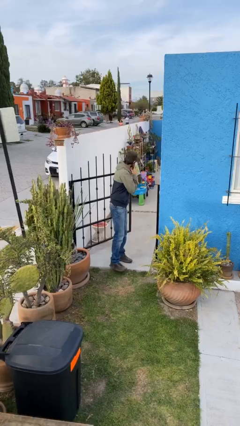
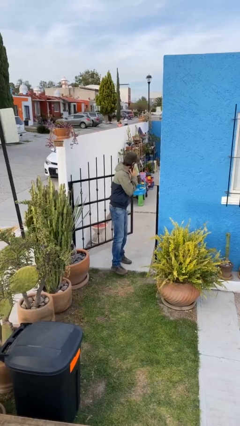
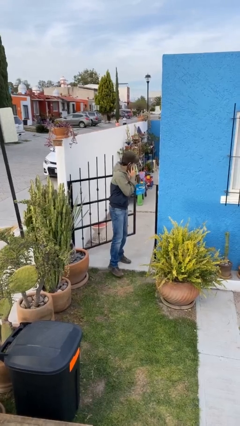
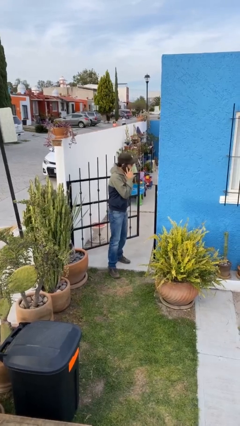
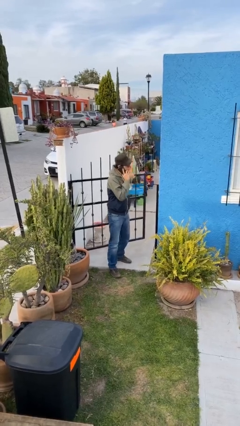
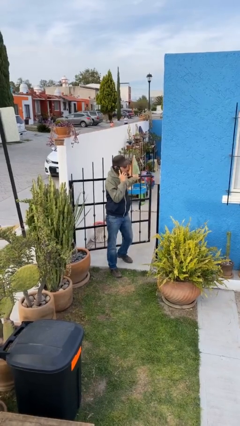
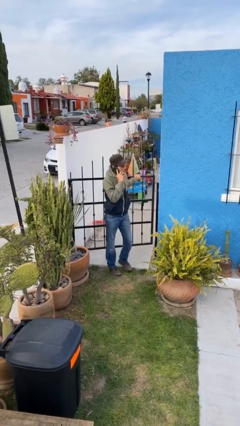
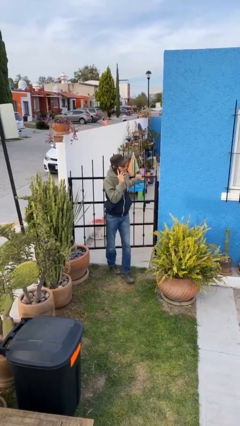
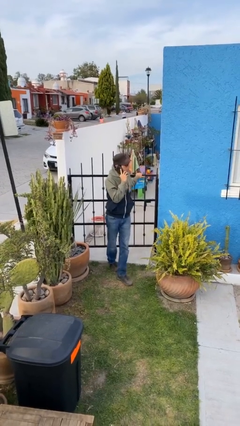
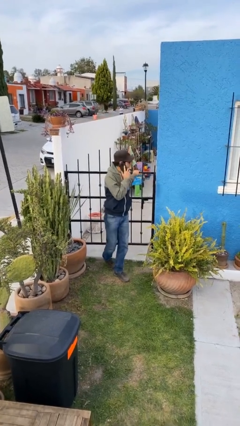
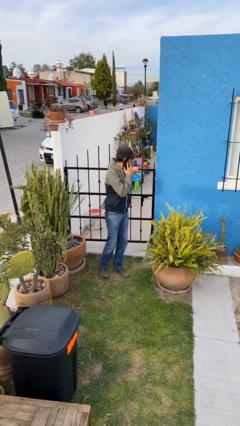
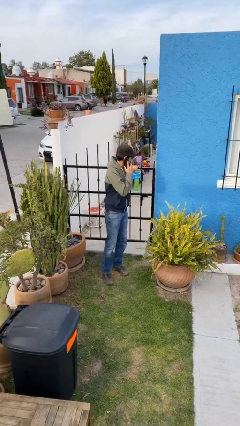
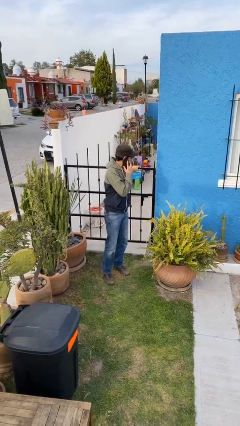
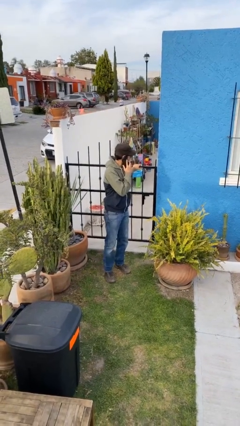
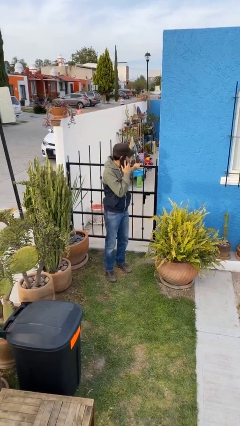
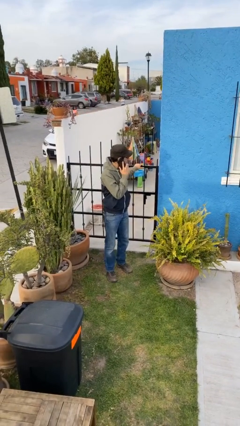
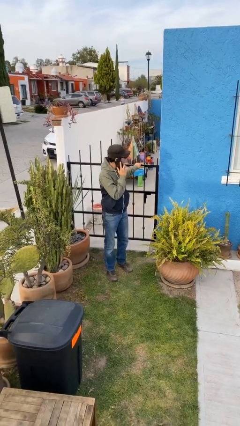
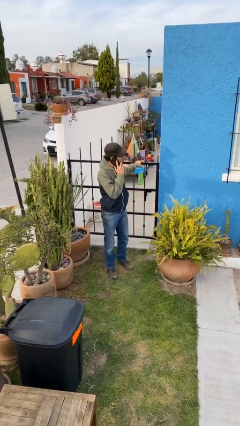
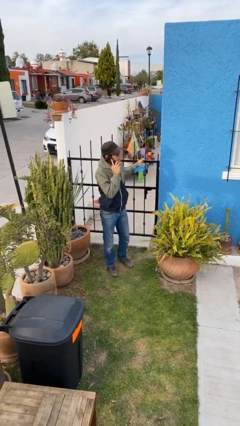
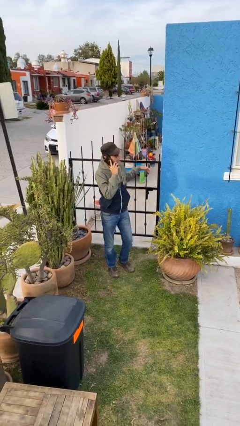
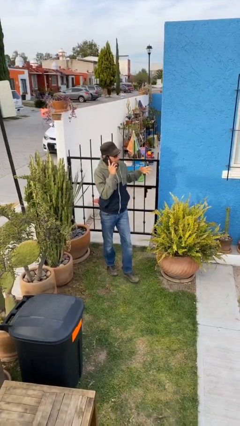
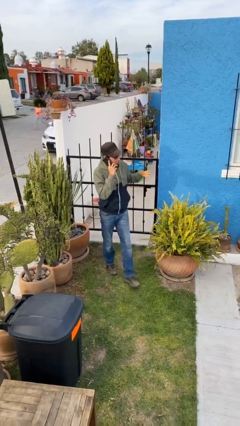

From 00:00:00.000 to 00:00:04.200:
person closes facility door

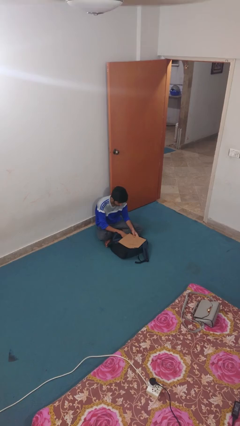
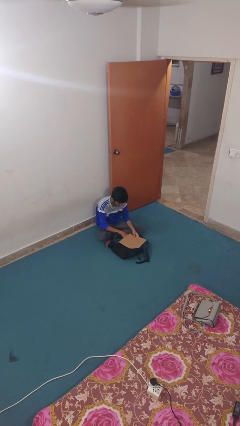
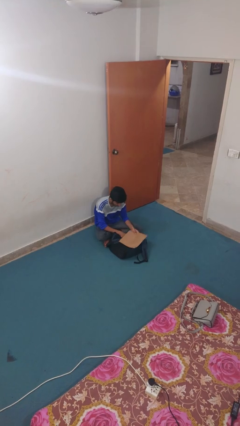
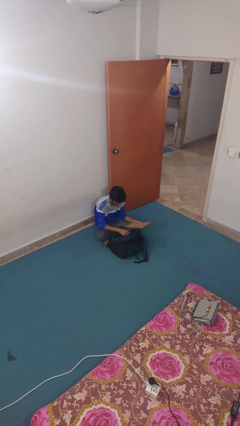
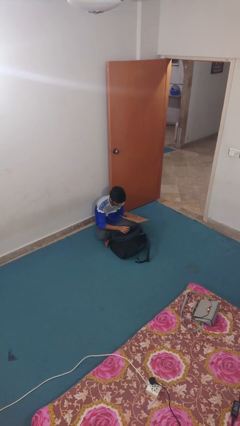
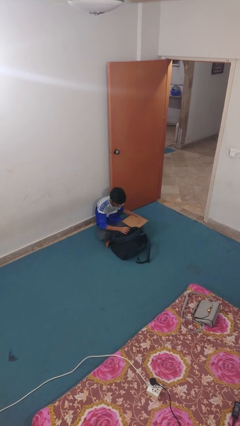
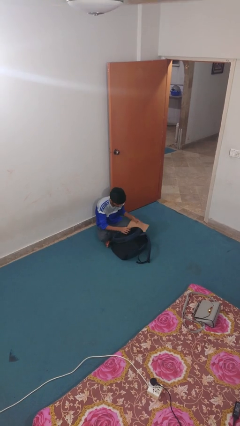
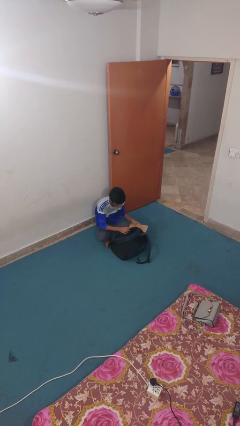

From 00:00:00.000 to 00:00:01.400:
person puts object into backpack

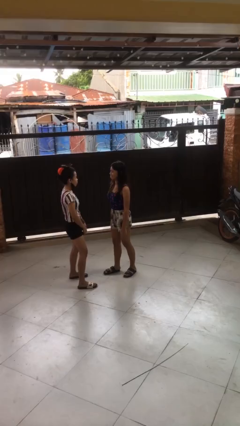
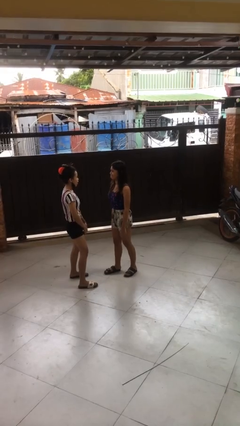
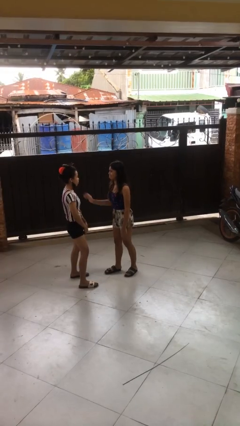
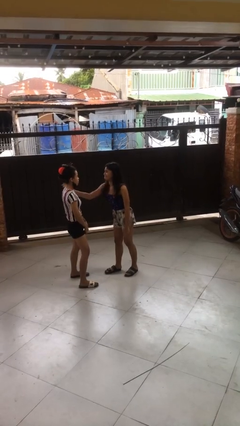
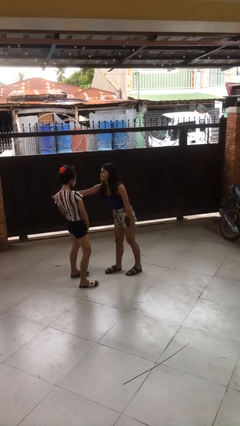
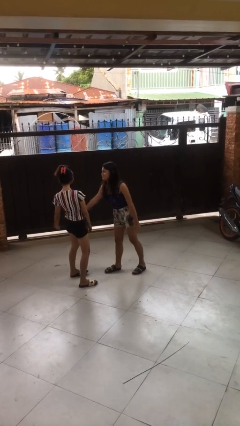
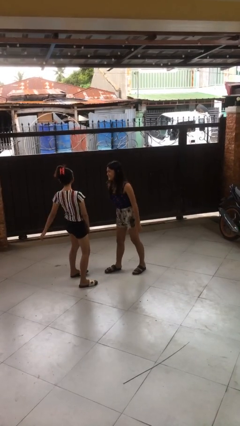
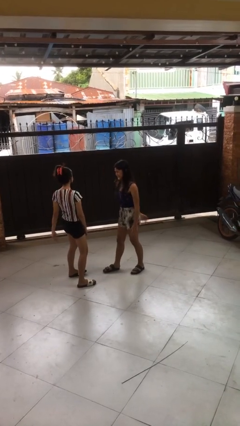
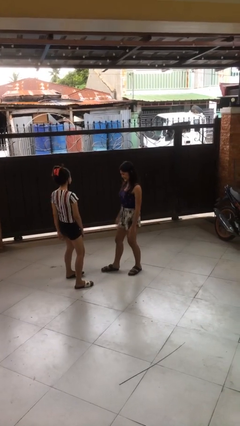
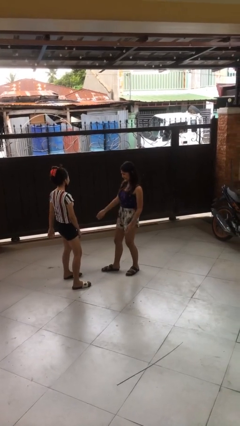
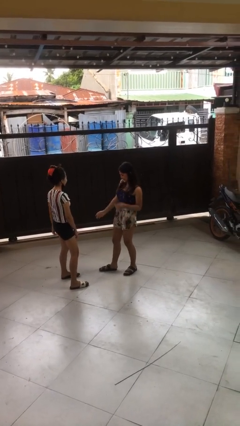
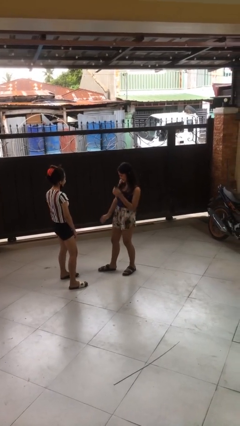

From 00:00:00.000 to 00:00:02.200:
person shoves person

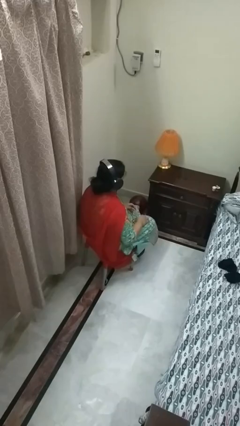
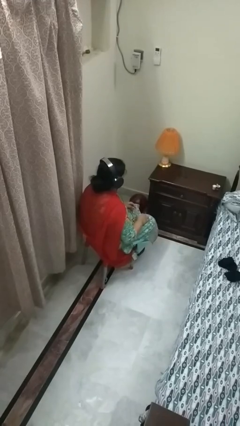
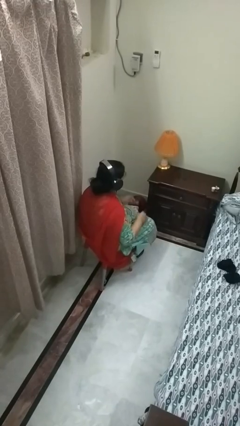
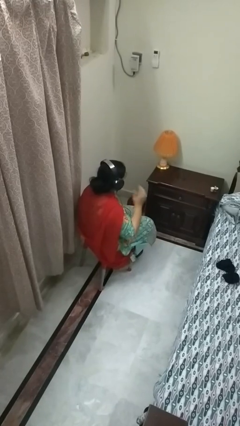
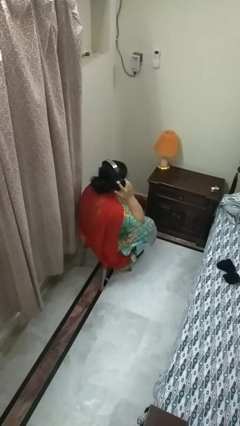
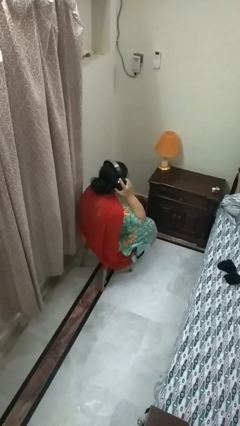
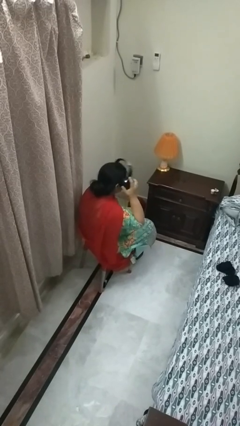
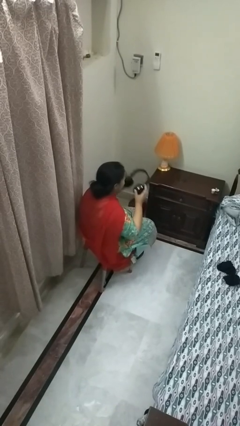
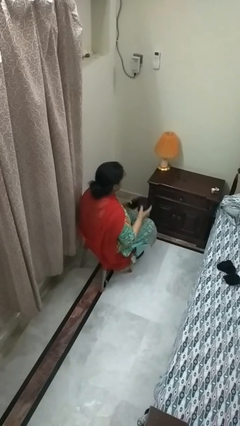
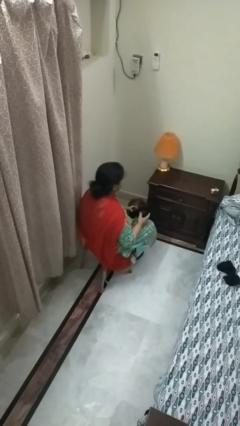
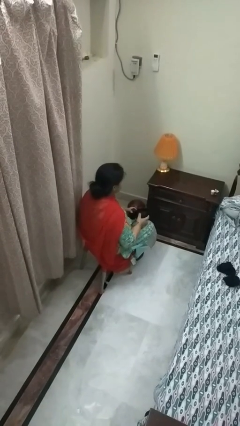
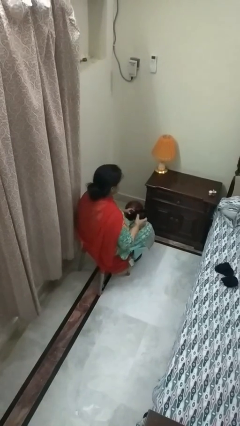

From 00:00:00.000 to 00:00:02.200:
person takes off headphones

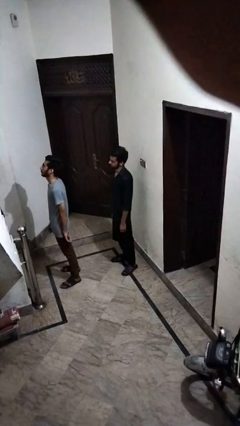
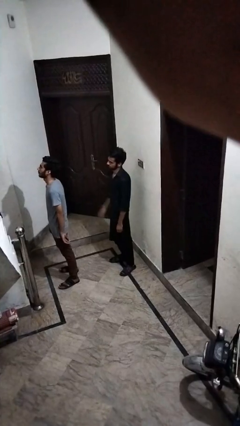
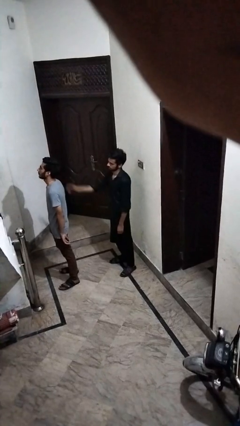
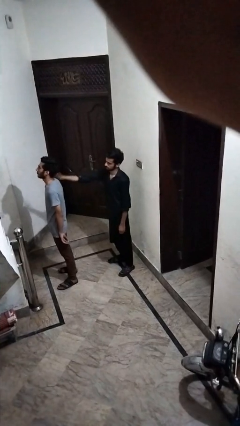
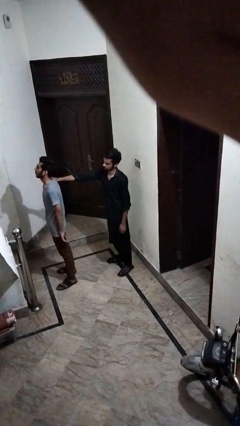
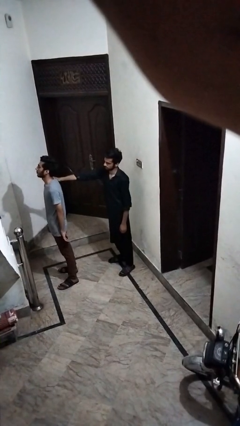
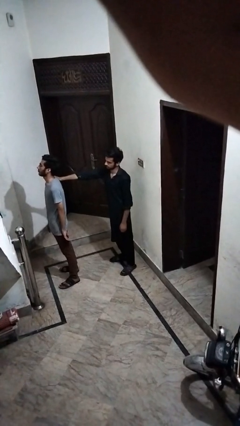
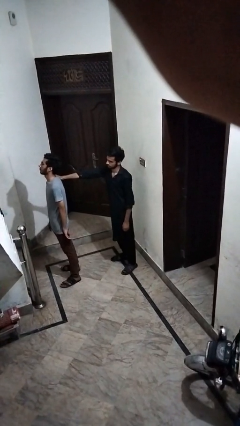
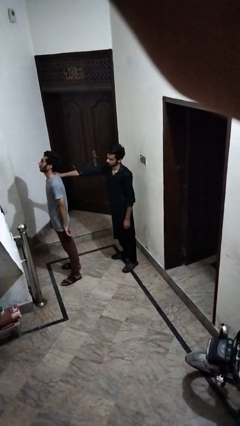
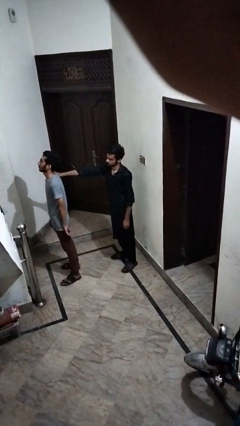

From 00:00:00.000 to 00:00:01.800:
person grabs person by shoulder

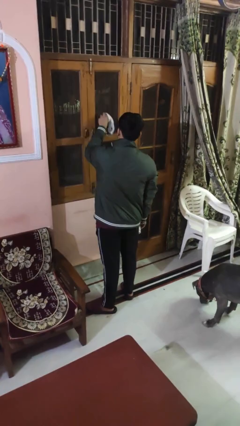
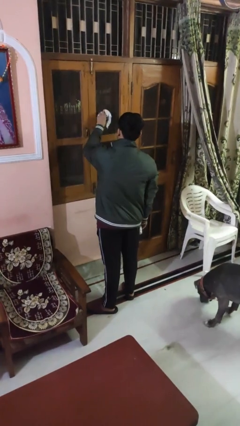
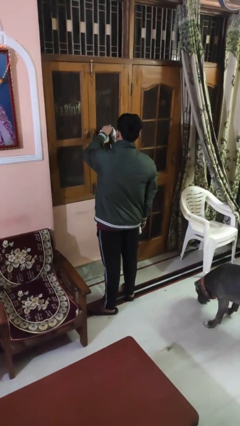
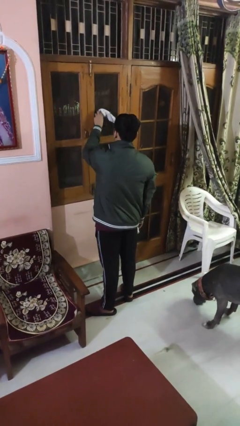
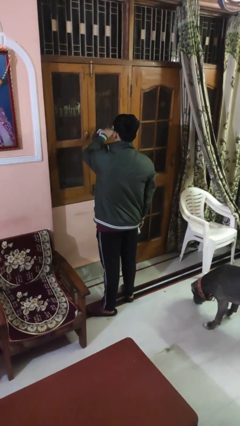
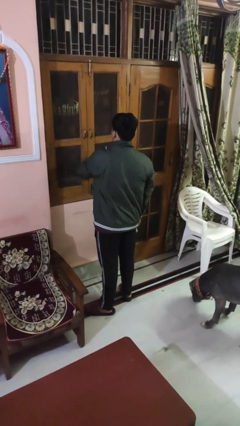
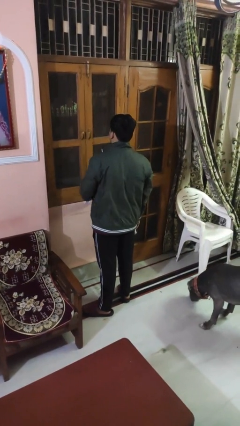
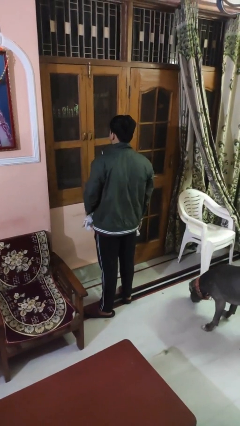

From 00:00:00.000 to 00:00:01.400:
person washes window

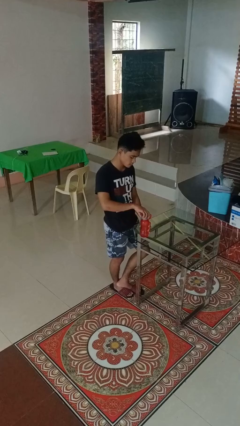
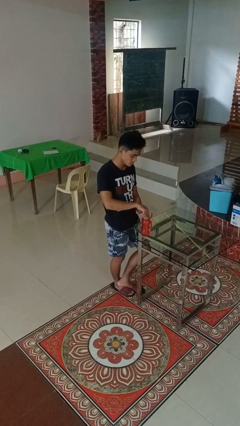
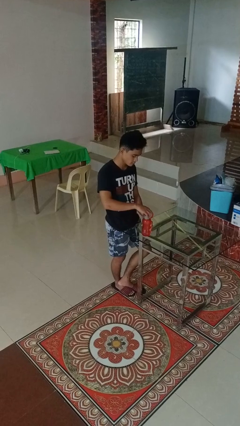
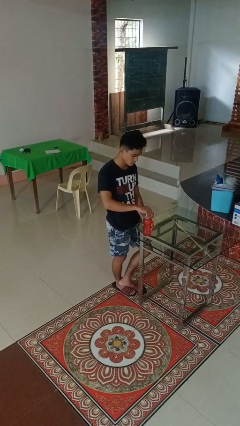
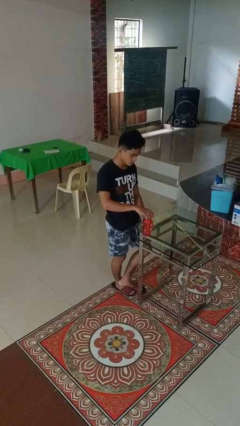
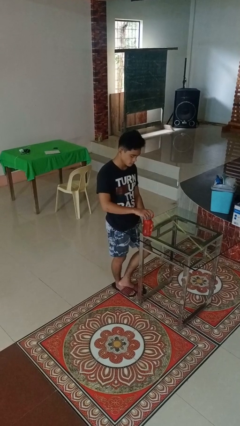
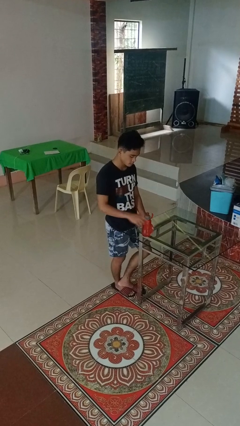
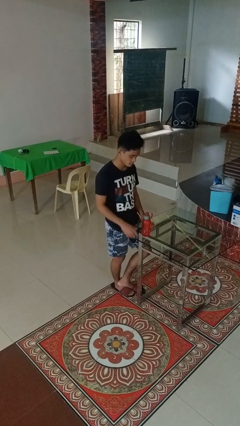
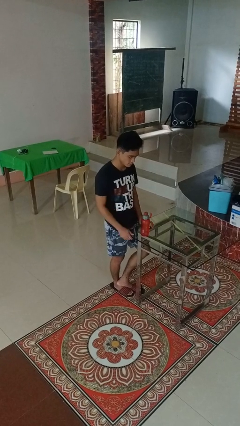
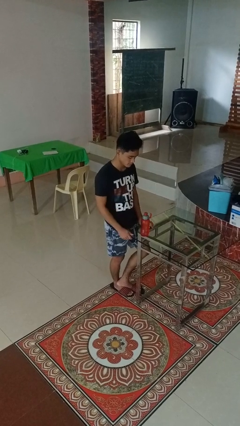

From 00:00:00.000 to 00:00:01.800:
person screws lid to bottle

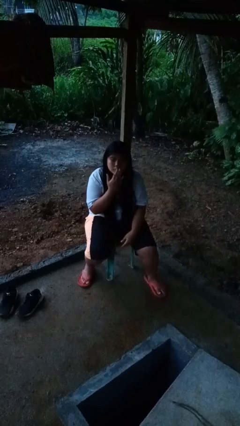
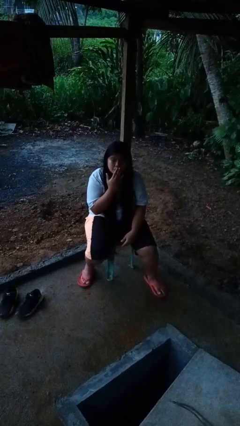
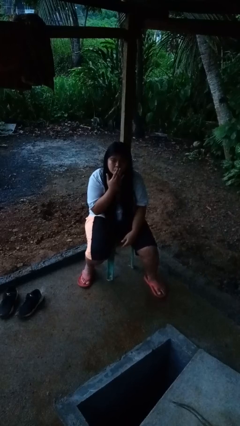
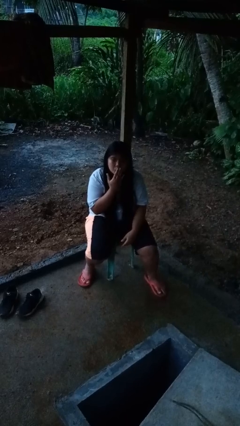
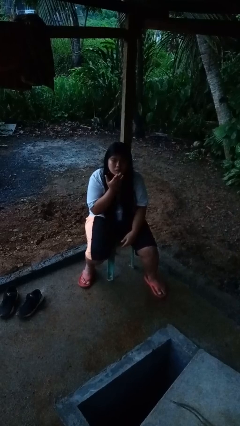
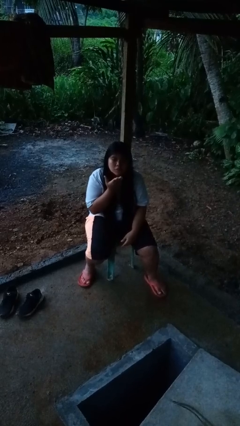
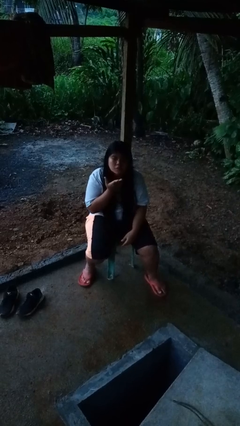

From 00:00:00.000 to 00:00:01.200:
person gestures blow kiss

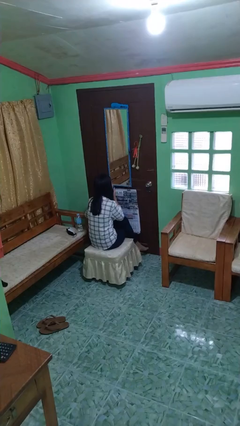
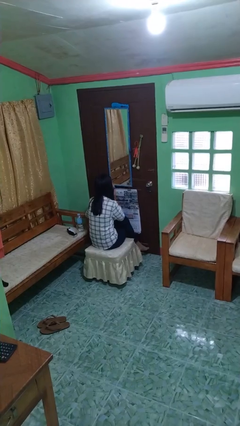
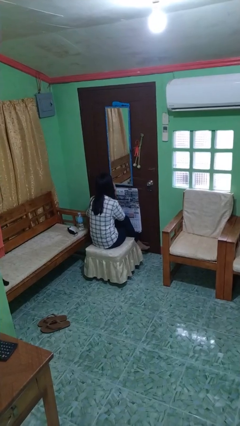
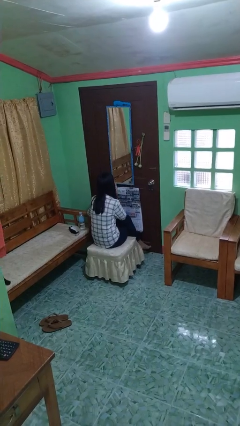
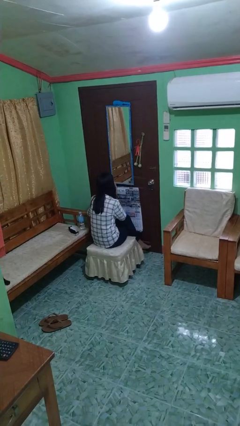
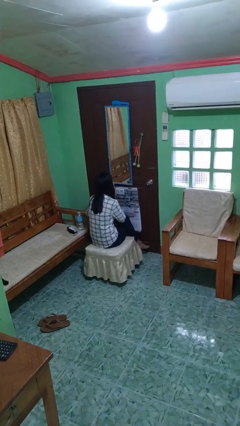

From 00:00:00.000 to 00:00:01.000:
person wipes mouth with napkin
